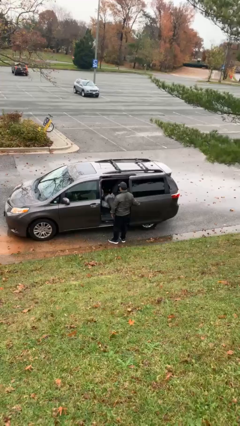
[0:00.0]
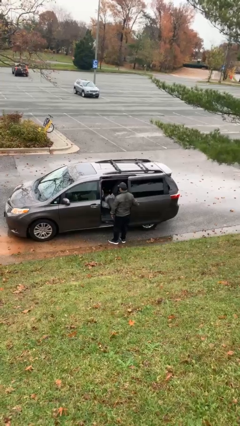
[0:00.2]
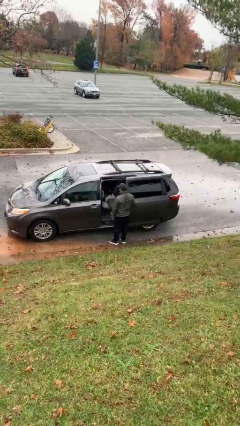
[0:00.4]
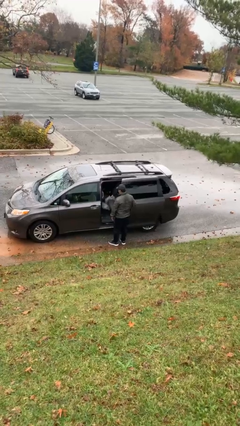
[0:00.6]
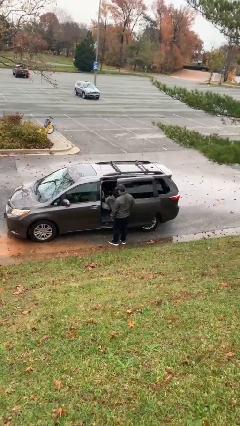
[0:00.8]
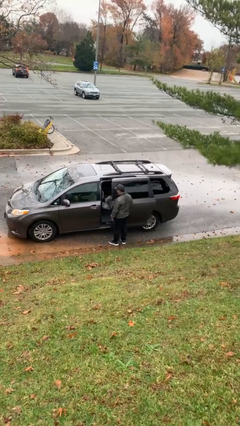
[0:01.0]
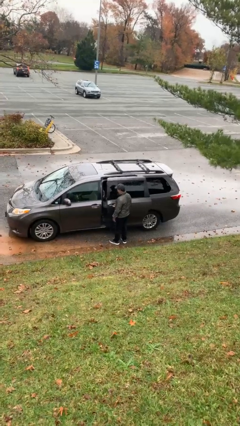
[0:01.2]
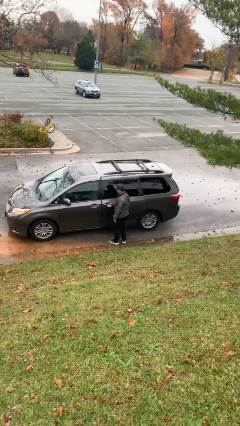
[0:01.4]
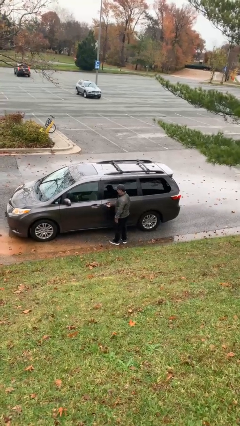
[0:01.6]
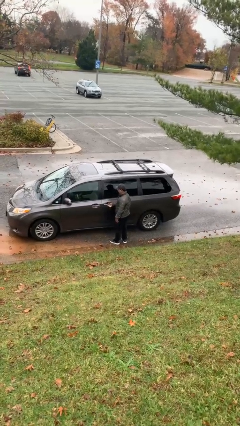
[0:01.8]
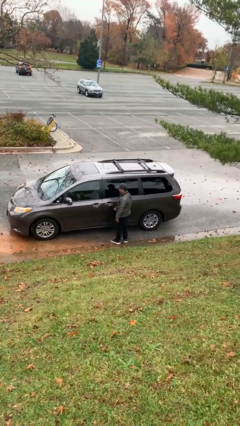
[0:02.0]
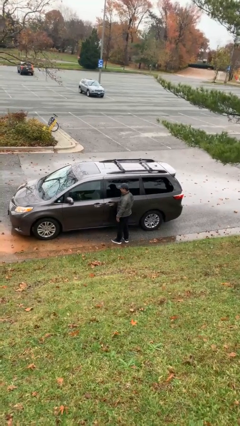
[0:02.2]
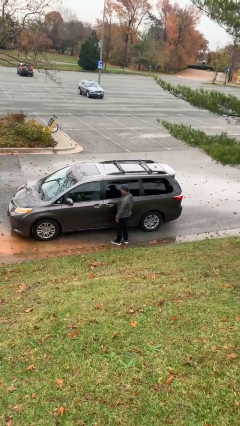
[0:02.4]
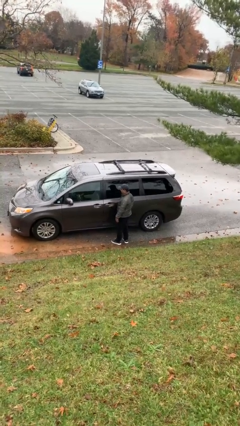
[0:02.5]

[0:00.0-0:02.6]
person closes car door

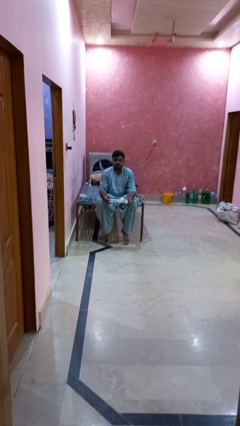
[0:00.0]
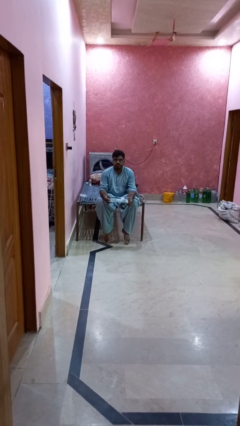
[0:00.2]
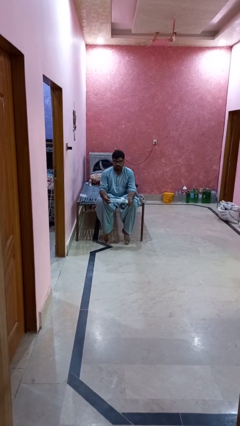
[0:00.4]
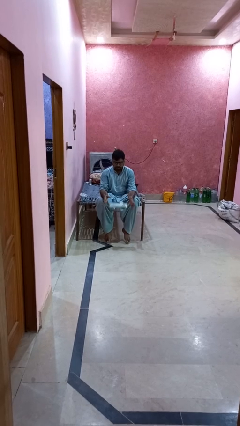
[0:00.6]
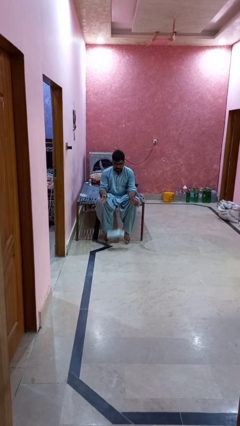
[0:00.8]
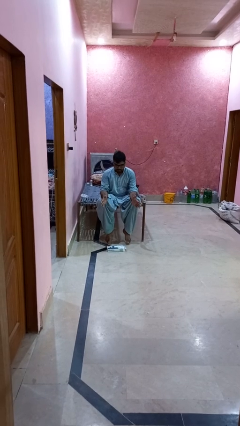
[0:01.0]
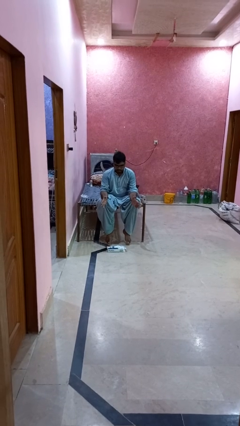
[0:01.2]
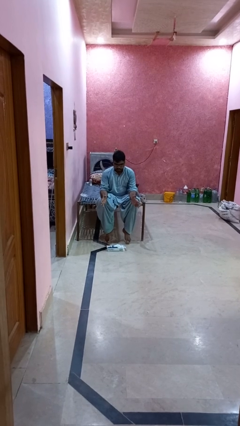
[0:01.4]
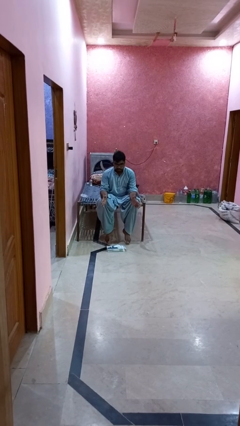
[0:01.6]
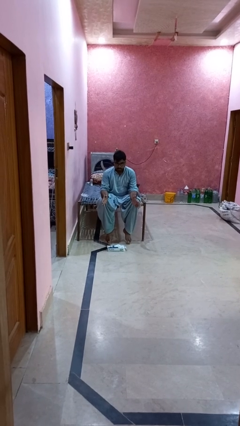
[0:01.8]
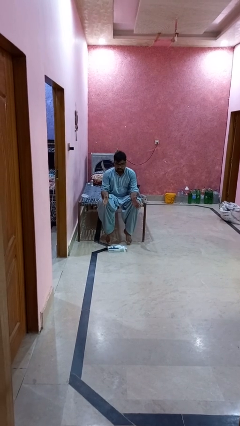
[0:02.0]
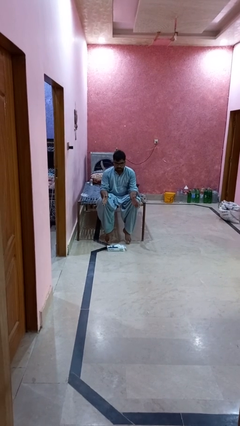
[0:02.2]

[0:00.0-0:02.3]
person drops object

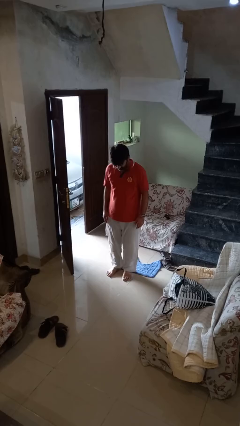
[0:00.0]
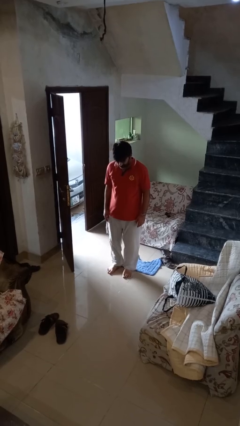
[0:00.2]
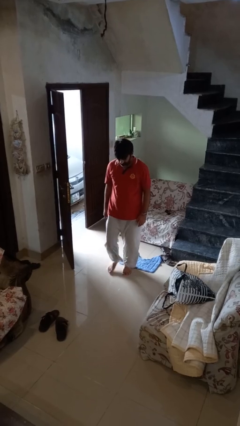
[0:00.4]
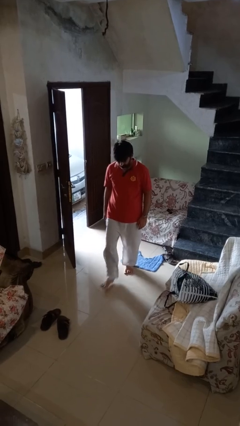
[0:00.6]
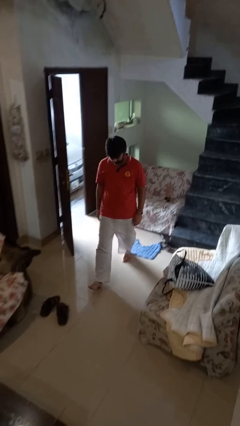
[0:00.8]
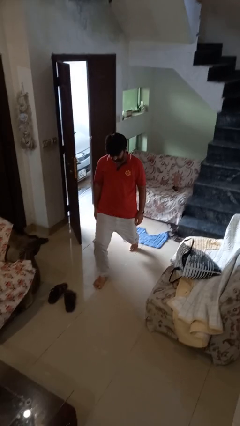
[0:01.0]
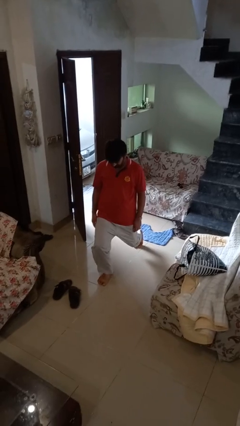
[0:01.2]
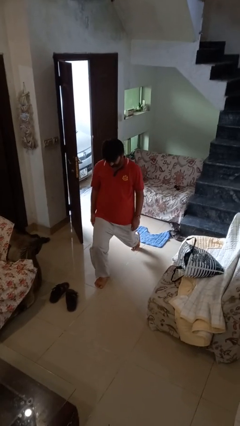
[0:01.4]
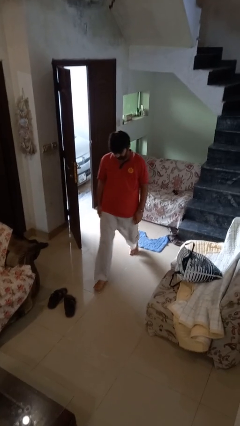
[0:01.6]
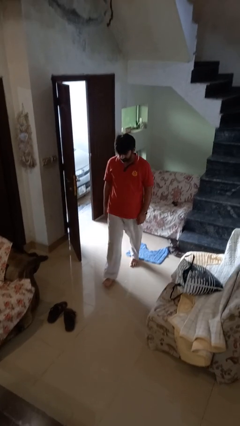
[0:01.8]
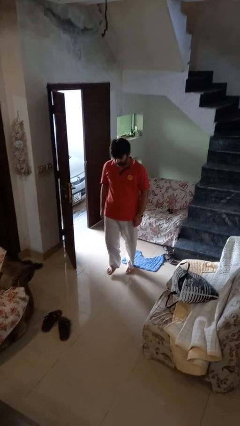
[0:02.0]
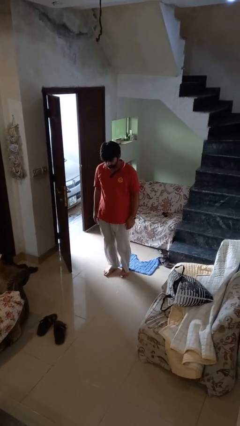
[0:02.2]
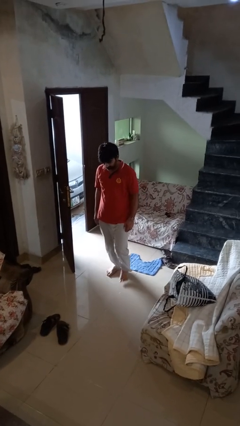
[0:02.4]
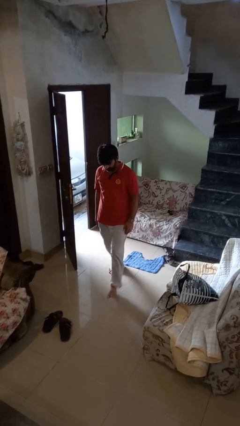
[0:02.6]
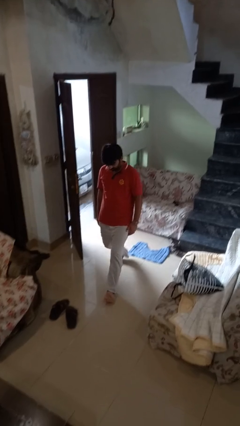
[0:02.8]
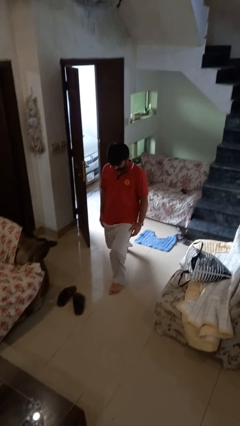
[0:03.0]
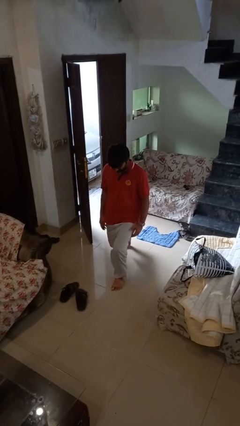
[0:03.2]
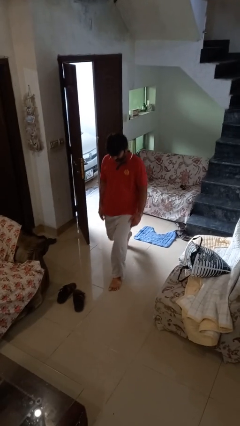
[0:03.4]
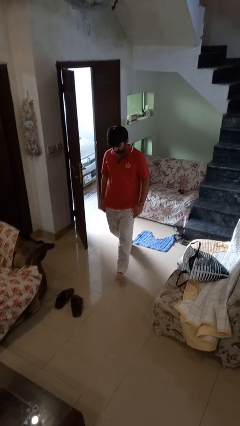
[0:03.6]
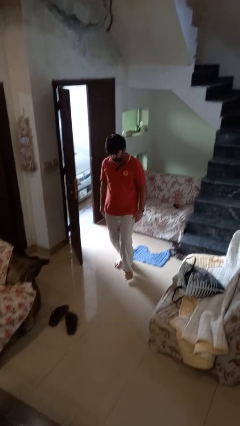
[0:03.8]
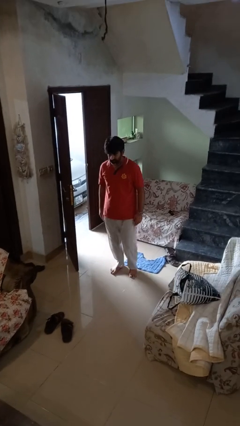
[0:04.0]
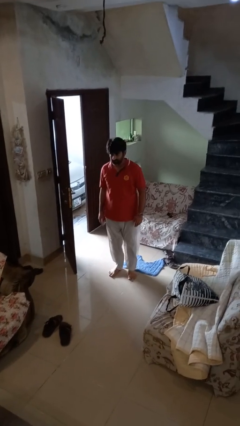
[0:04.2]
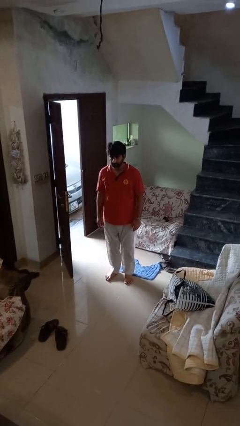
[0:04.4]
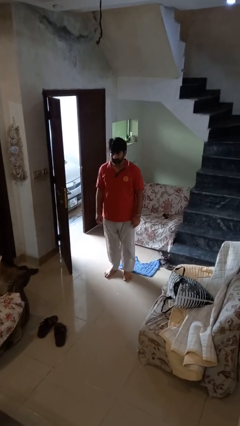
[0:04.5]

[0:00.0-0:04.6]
person exercises with lunges

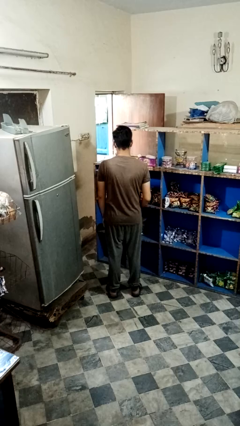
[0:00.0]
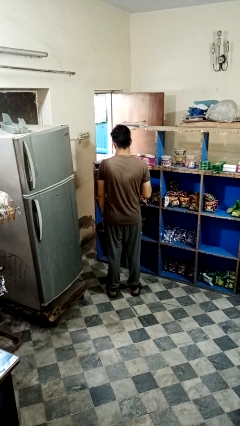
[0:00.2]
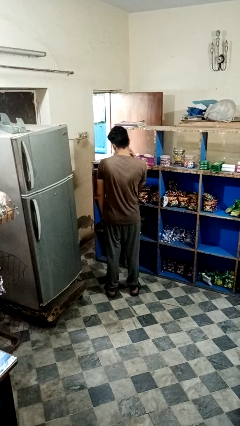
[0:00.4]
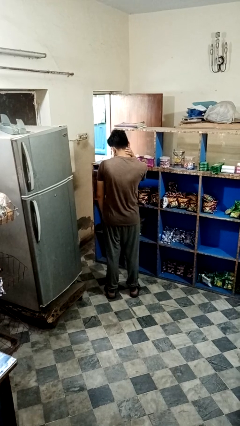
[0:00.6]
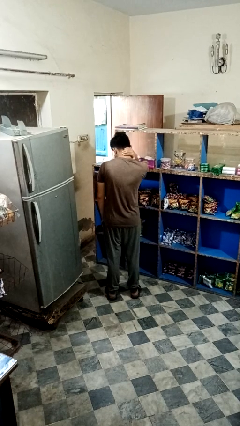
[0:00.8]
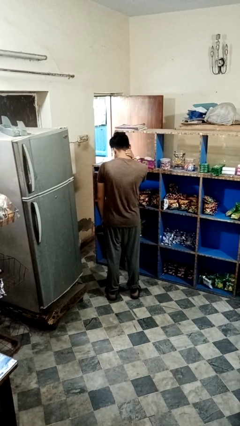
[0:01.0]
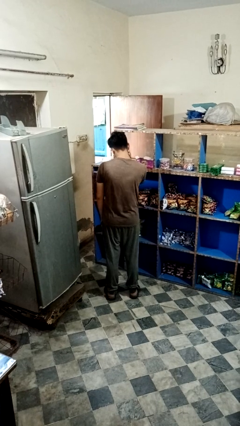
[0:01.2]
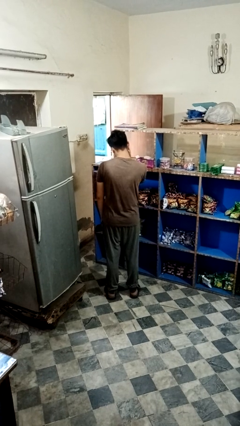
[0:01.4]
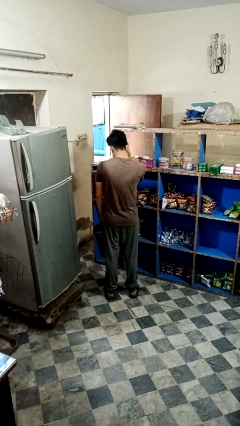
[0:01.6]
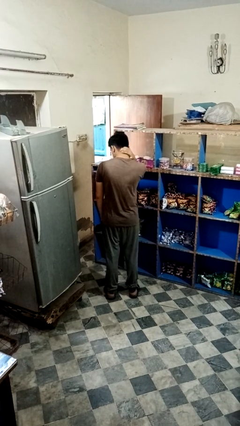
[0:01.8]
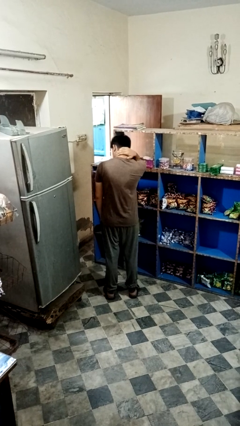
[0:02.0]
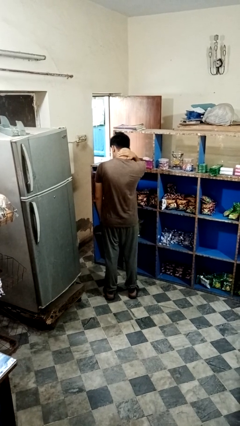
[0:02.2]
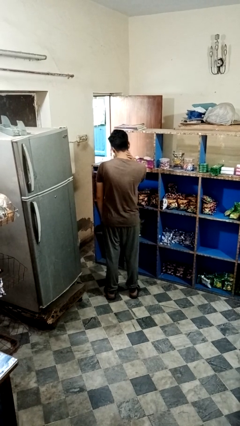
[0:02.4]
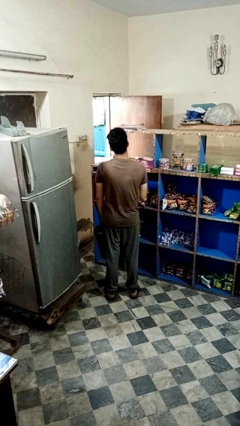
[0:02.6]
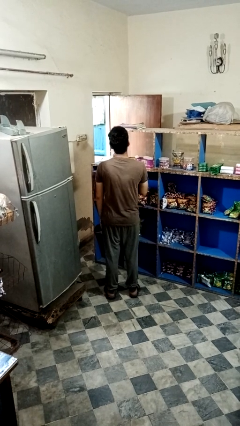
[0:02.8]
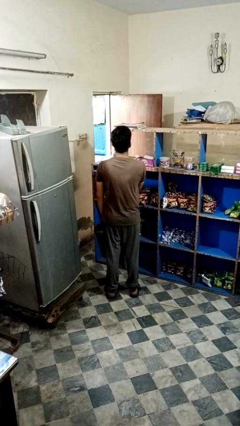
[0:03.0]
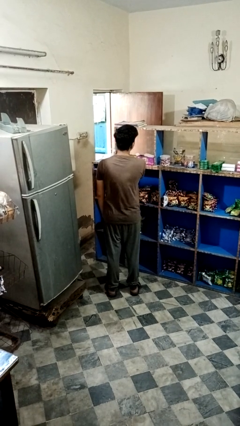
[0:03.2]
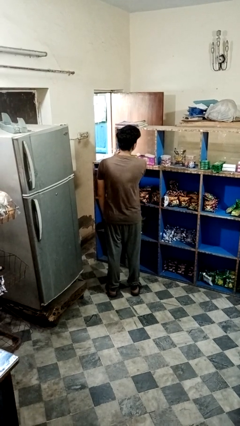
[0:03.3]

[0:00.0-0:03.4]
person rubs neck

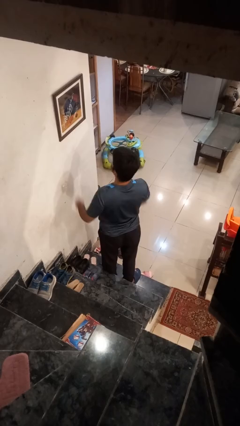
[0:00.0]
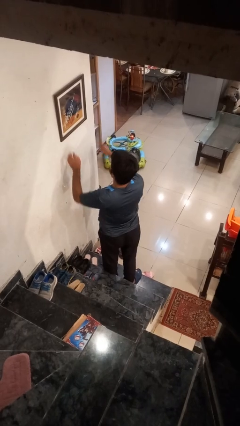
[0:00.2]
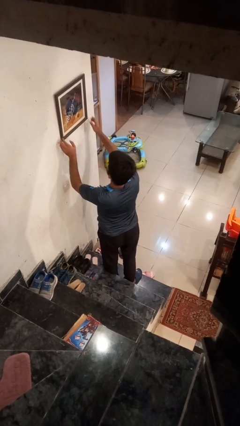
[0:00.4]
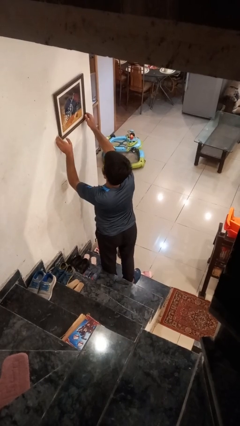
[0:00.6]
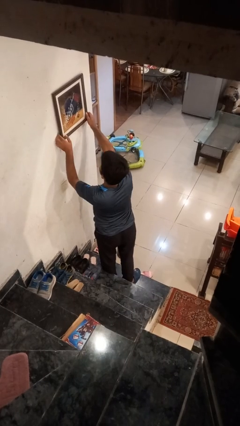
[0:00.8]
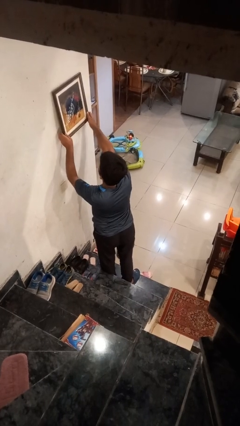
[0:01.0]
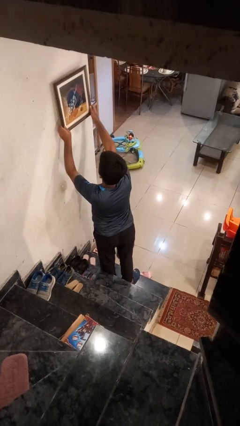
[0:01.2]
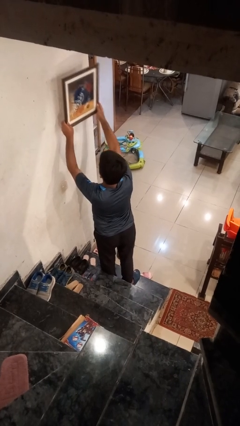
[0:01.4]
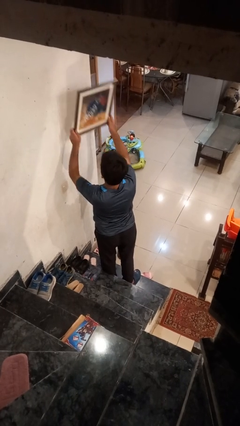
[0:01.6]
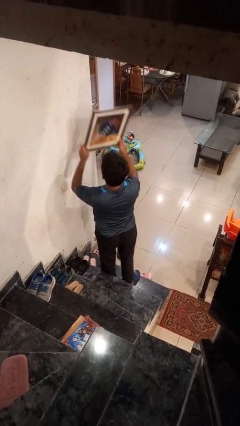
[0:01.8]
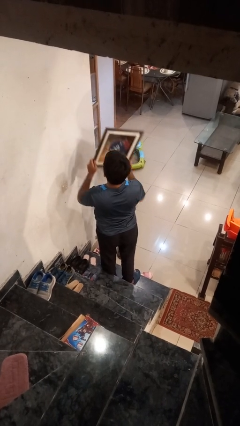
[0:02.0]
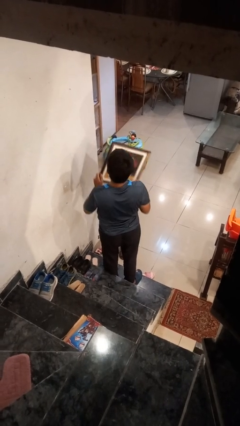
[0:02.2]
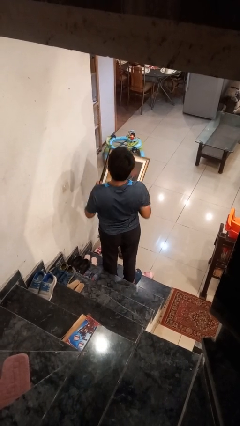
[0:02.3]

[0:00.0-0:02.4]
person takes down picture frame

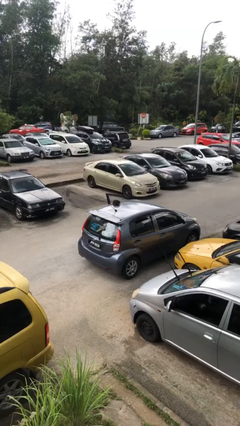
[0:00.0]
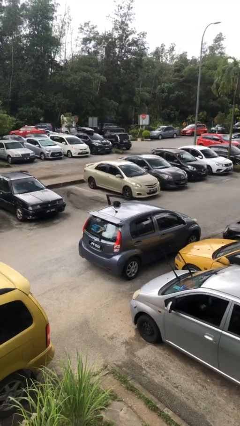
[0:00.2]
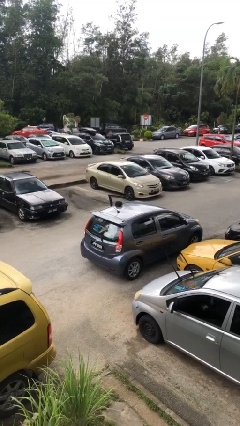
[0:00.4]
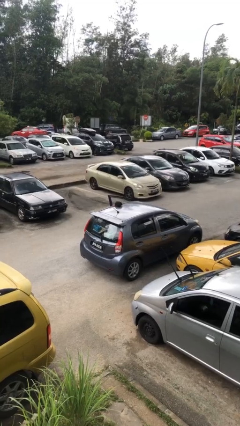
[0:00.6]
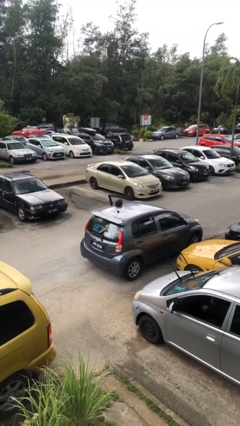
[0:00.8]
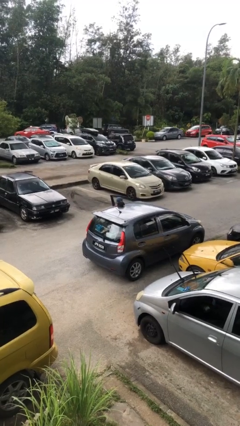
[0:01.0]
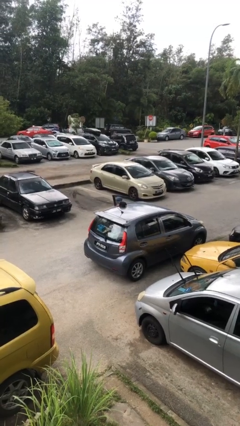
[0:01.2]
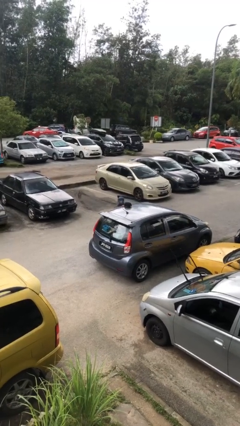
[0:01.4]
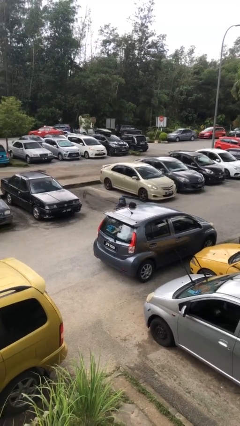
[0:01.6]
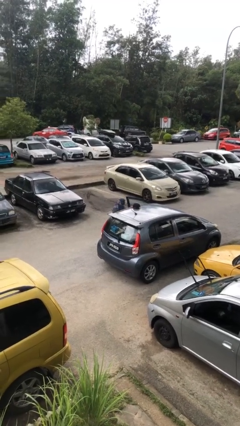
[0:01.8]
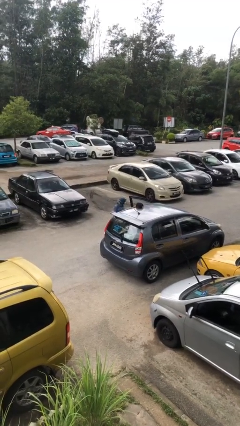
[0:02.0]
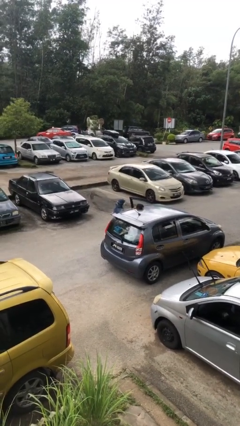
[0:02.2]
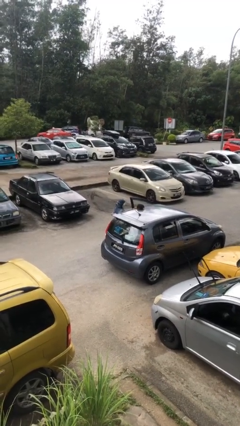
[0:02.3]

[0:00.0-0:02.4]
person exits car
